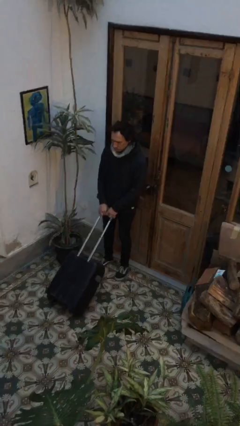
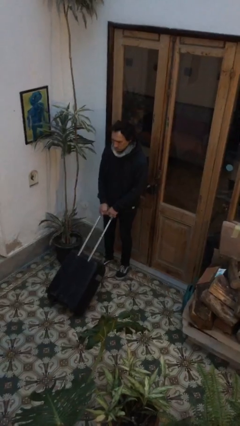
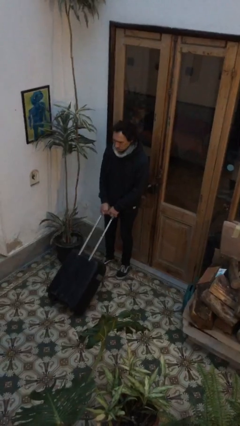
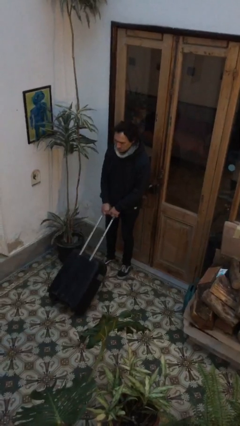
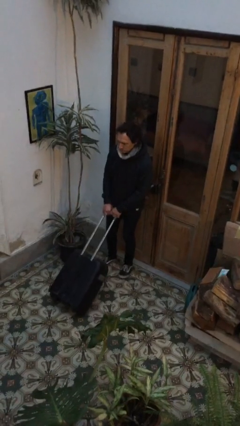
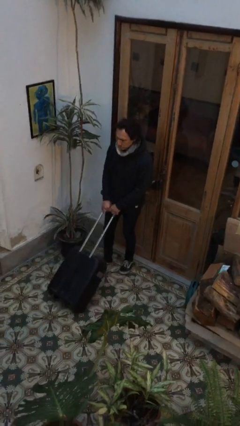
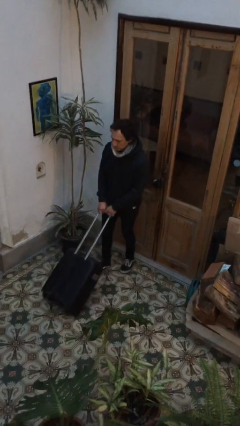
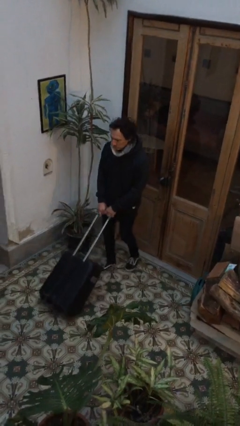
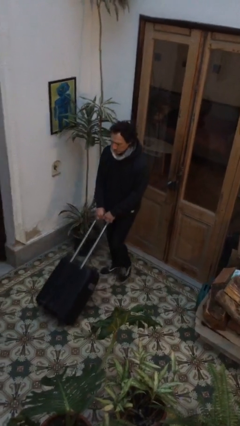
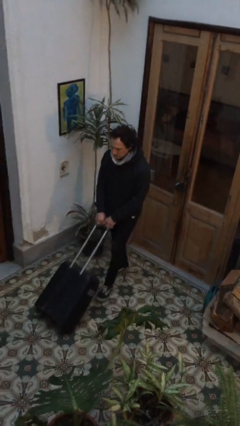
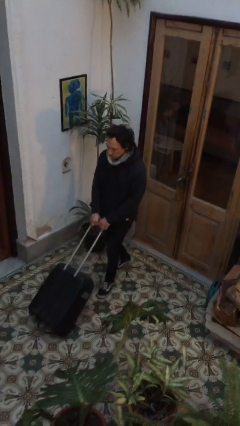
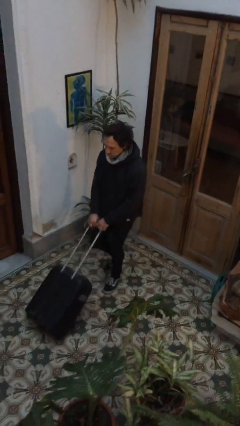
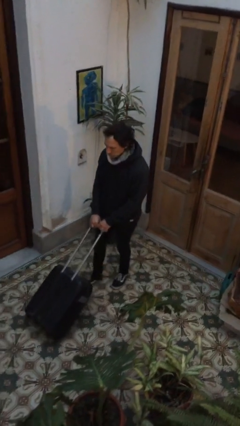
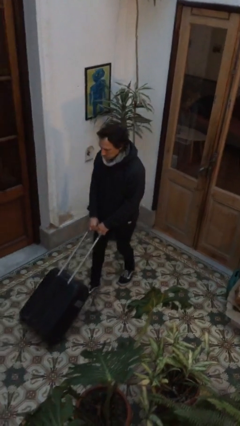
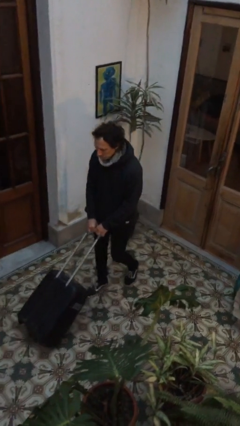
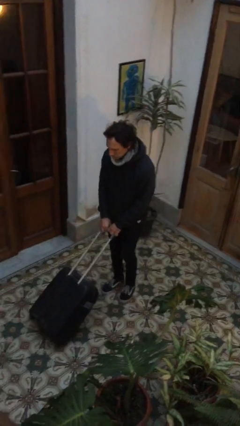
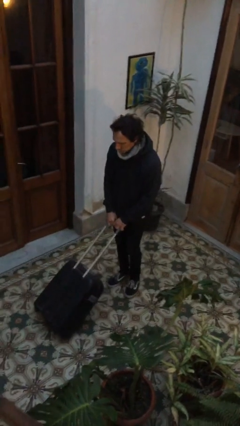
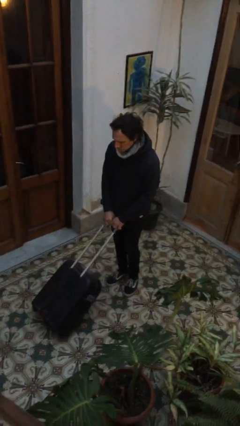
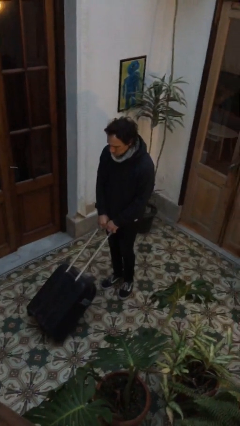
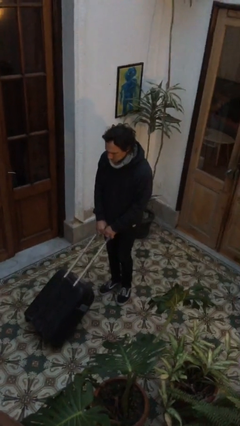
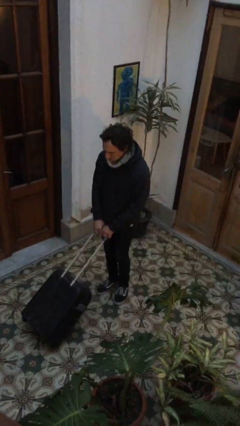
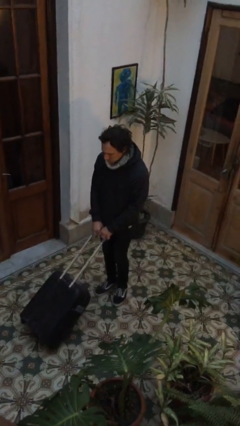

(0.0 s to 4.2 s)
person pushes wheeled cart

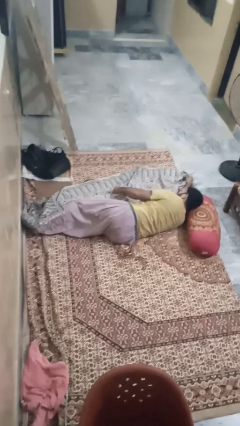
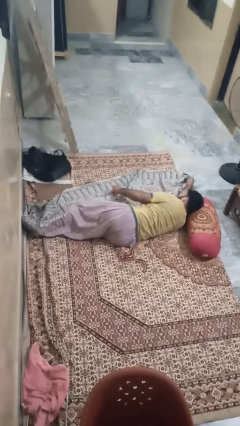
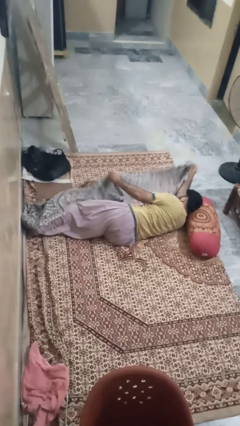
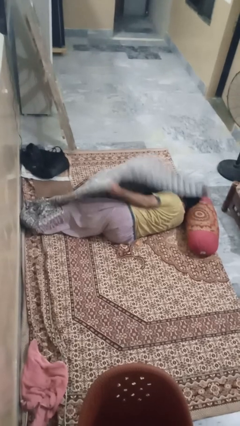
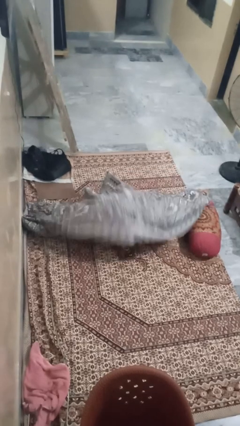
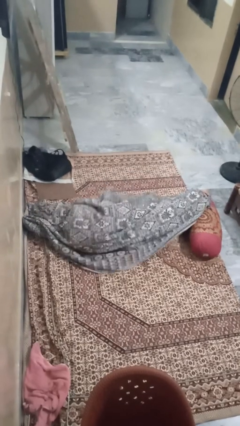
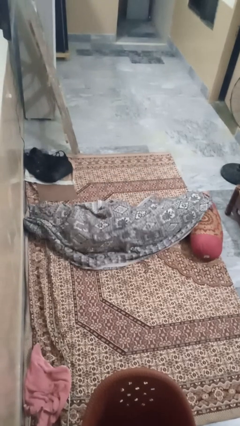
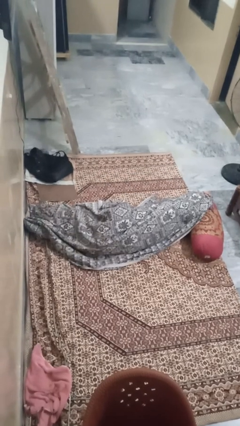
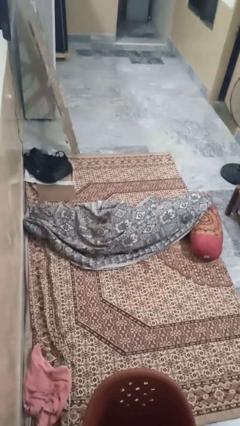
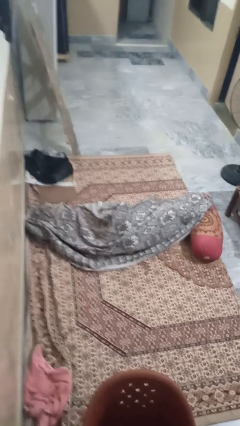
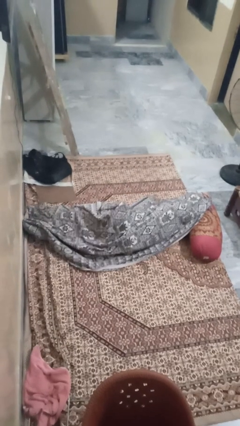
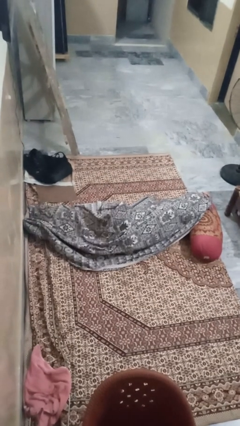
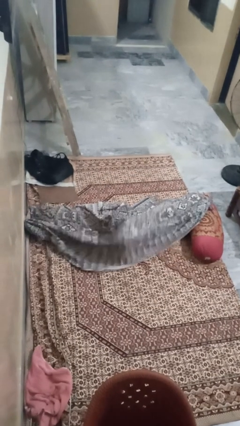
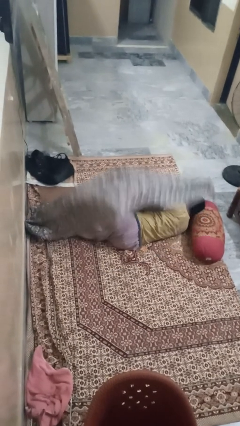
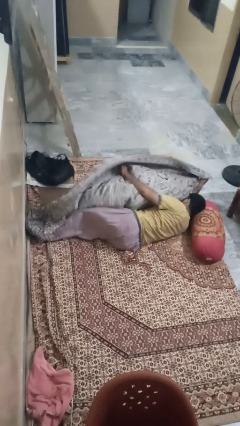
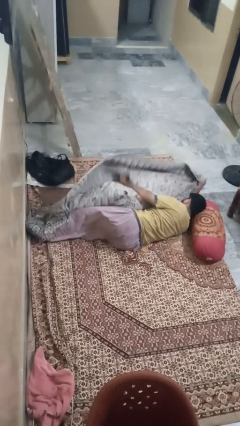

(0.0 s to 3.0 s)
person covers with blanket

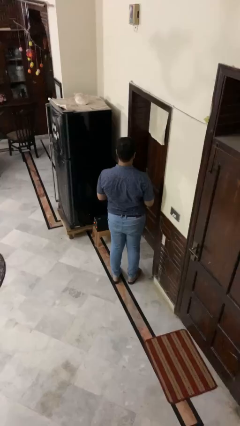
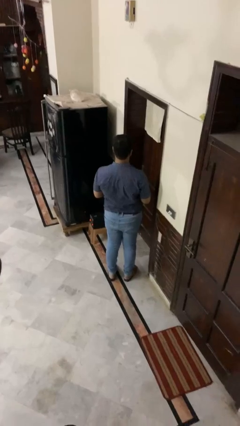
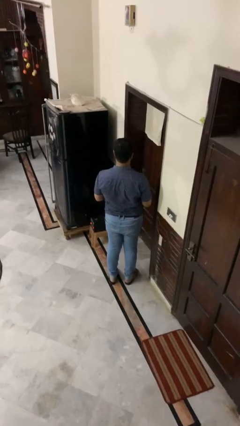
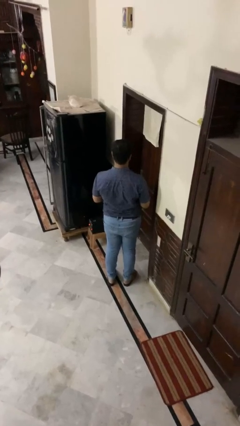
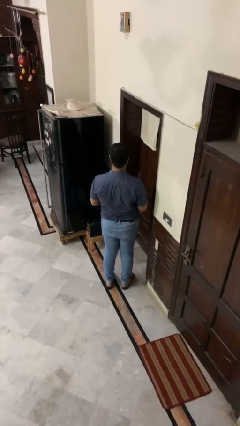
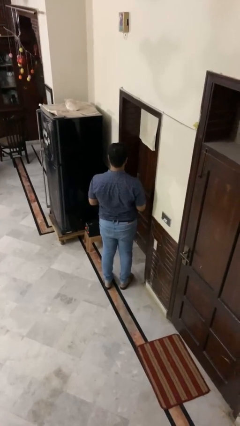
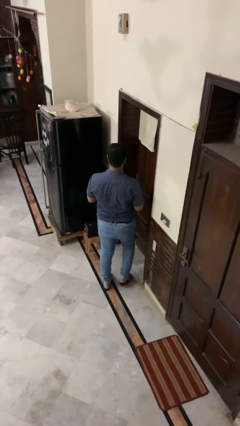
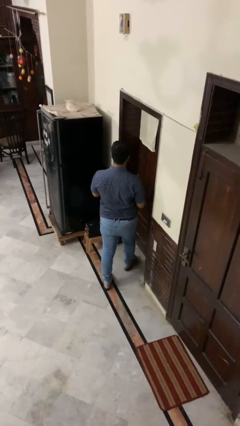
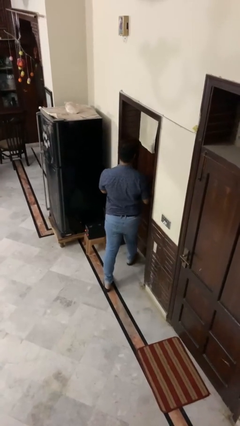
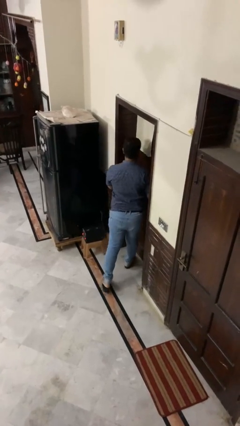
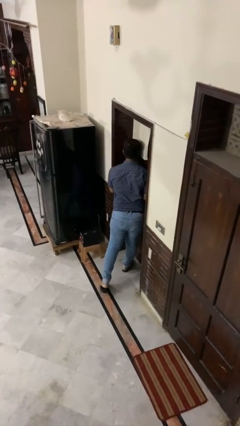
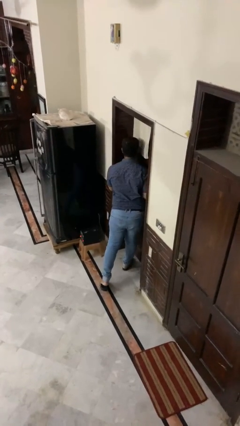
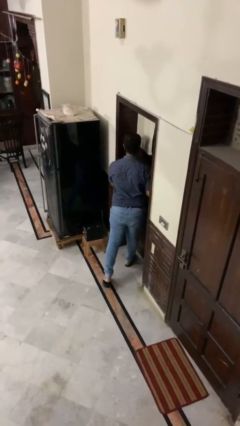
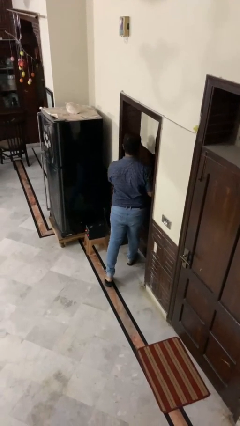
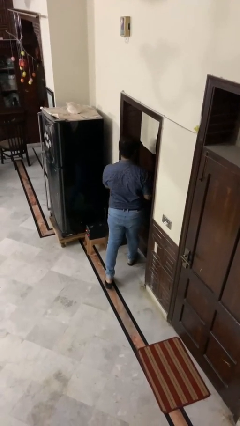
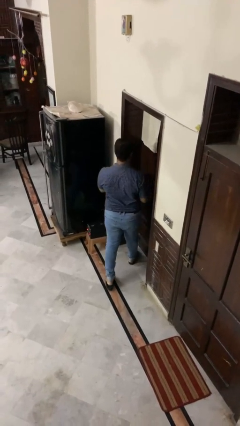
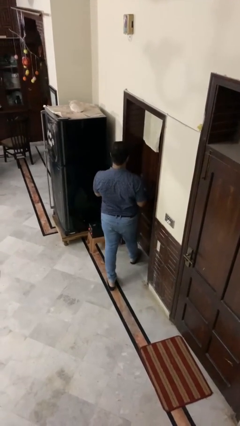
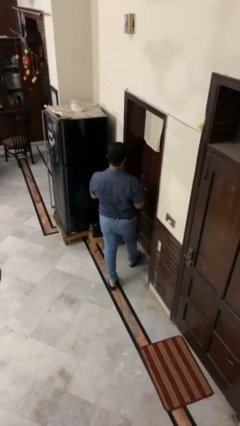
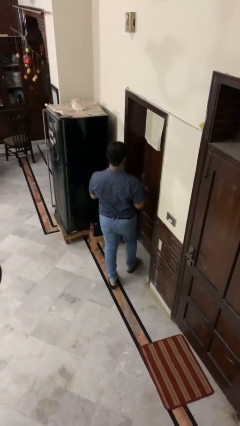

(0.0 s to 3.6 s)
person bumps into wall

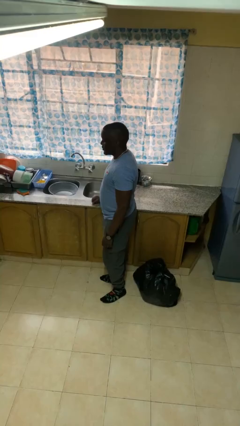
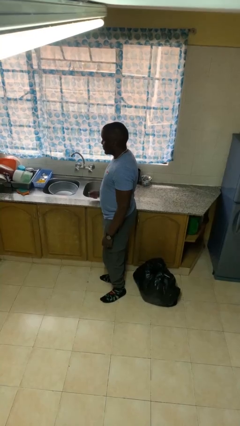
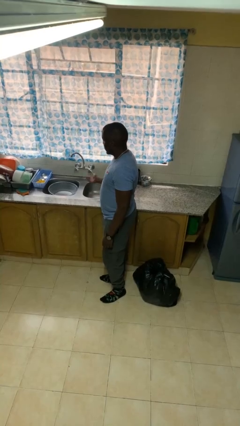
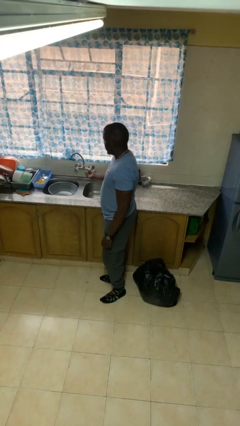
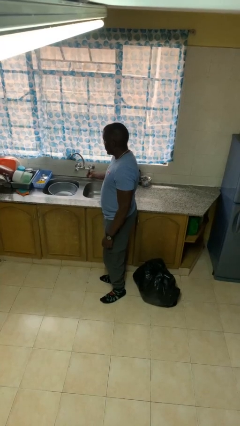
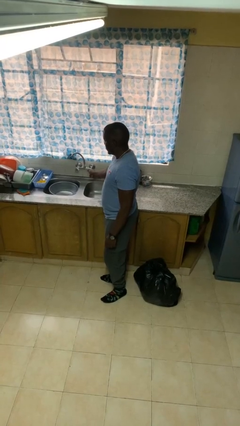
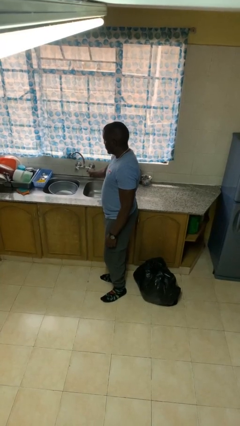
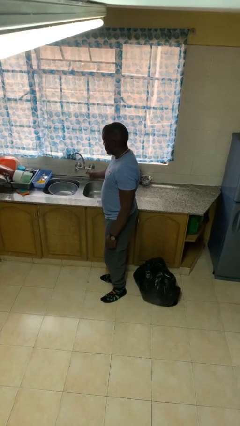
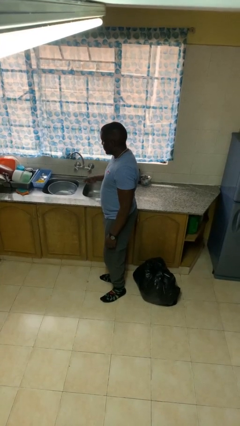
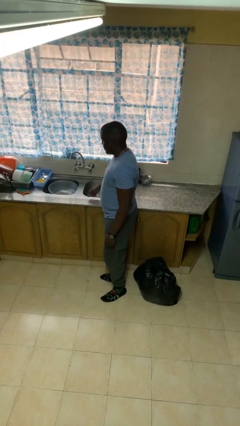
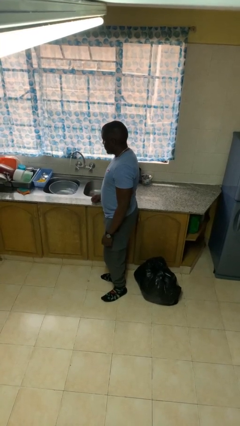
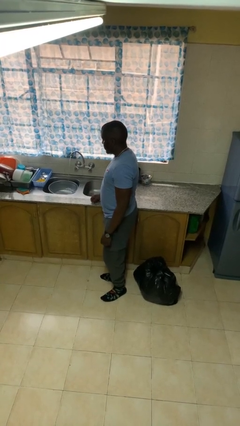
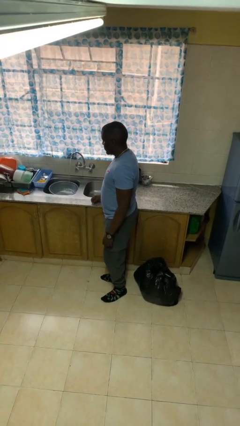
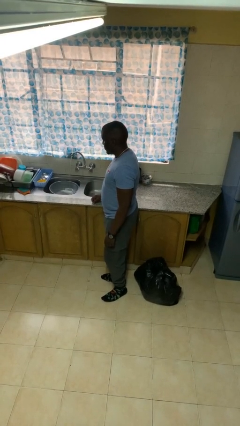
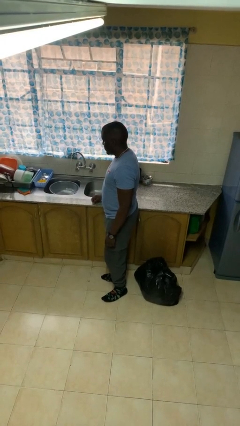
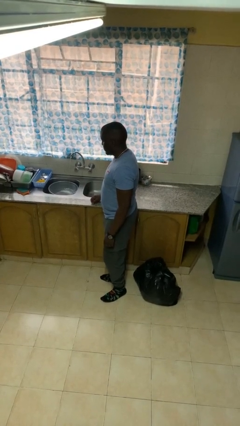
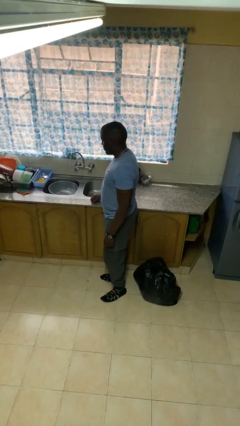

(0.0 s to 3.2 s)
person turns on faucet

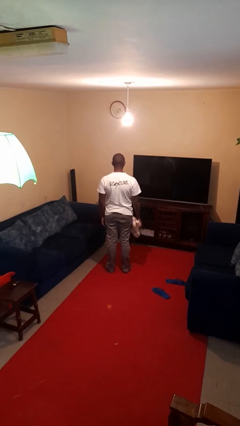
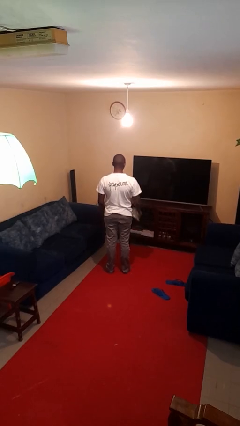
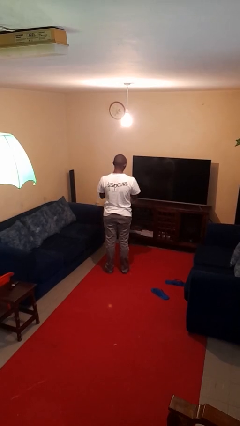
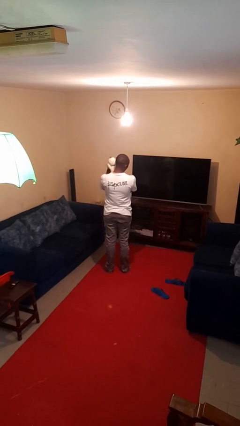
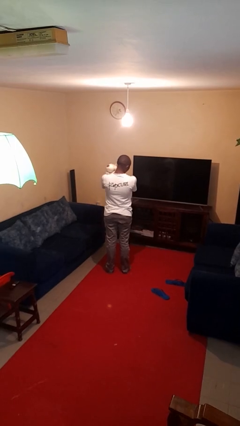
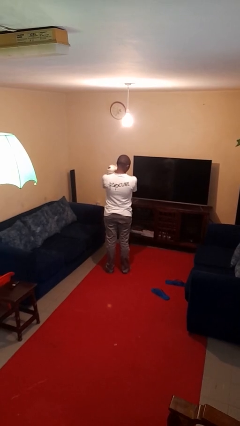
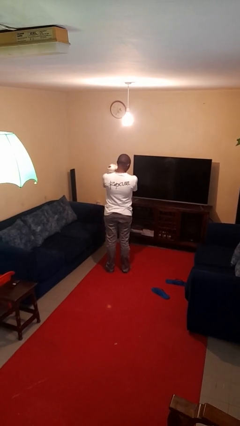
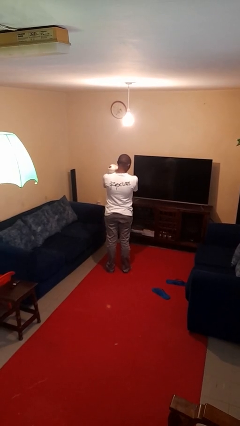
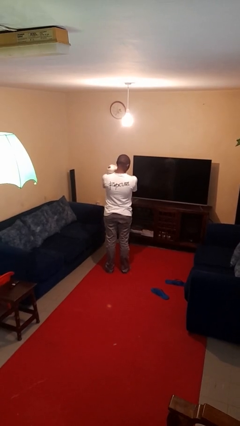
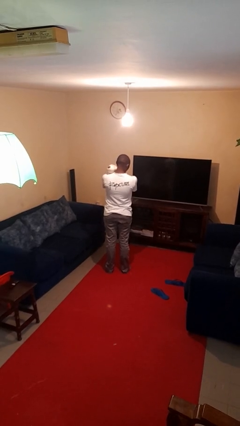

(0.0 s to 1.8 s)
person hugs stuffed animal

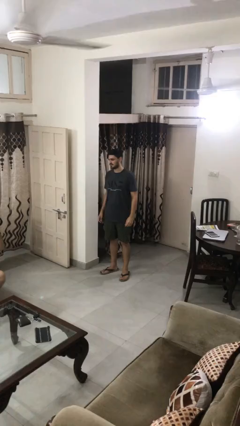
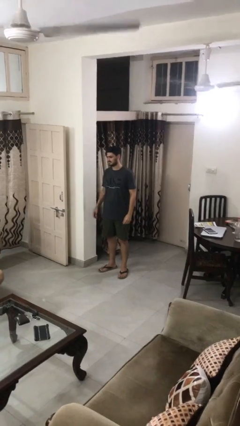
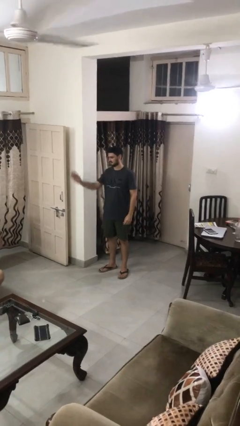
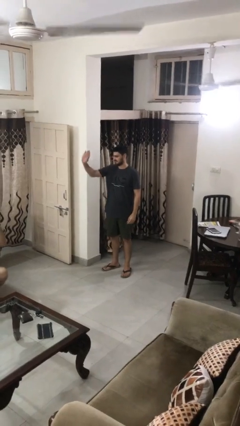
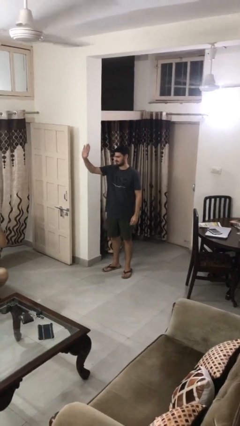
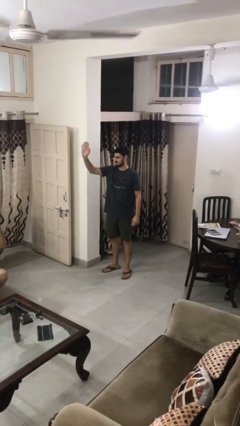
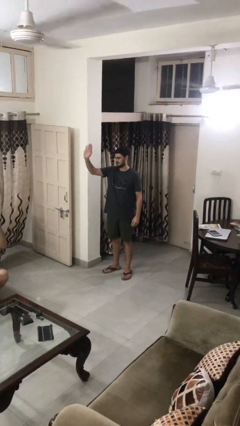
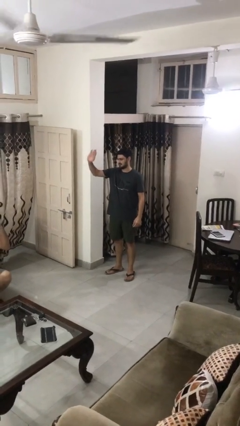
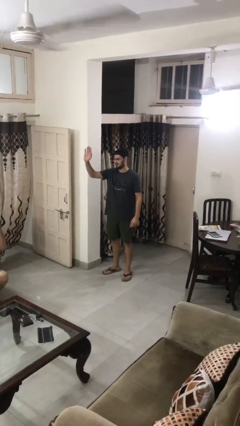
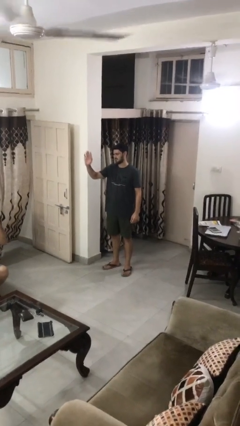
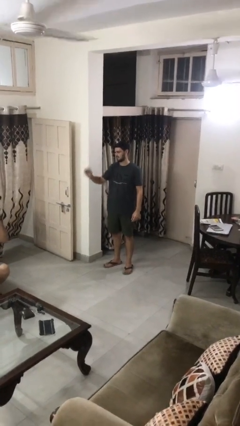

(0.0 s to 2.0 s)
person waves at person
